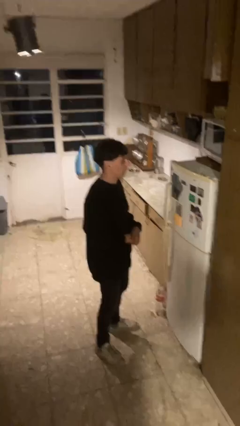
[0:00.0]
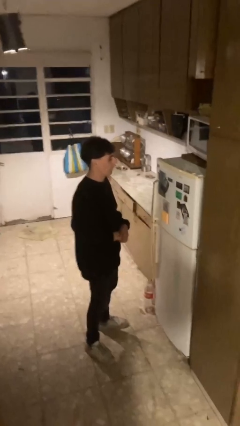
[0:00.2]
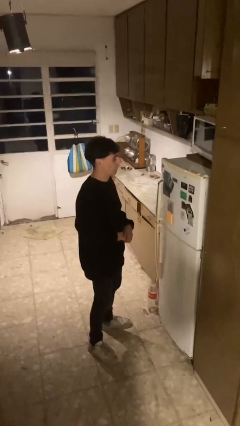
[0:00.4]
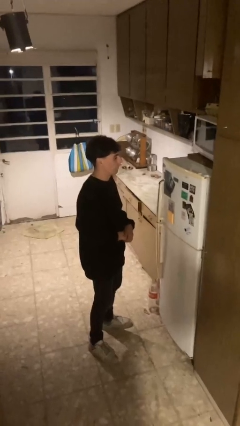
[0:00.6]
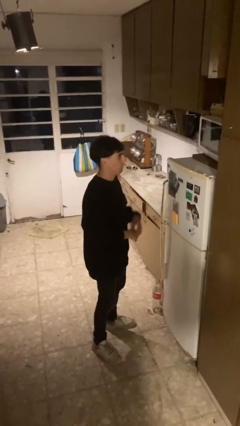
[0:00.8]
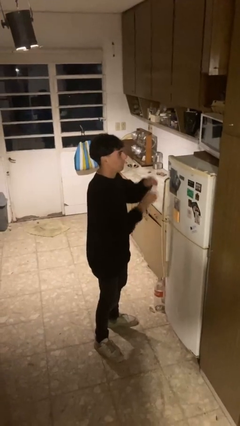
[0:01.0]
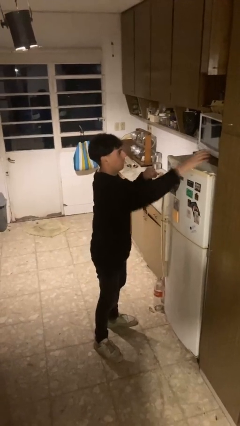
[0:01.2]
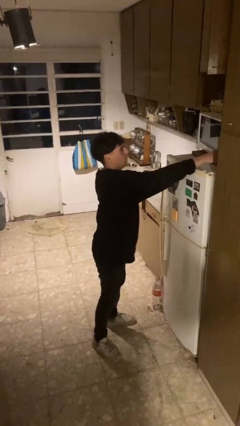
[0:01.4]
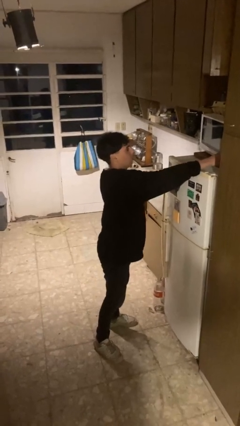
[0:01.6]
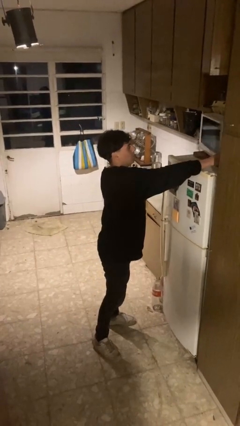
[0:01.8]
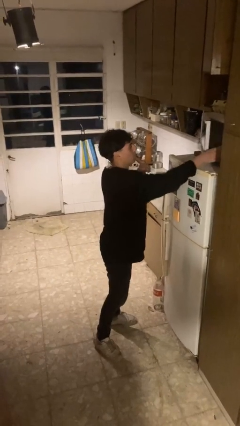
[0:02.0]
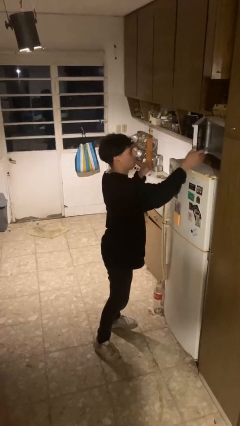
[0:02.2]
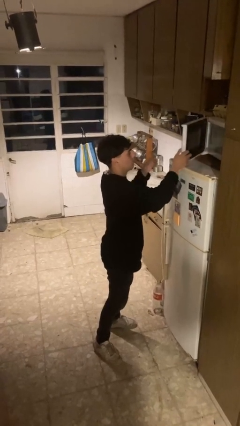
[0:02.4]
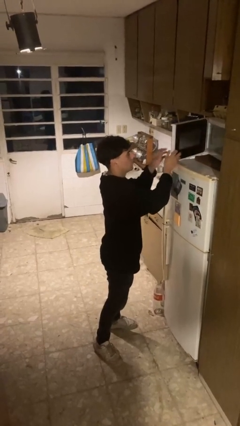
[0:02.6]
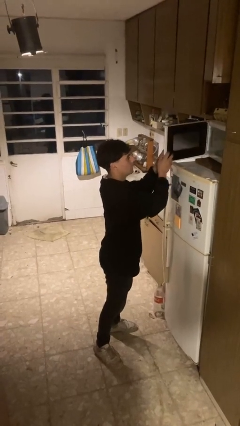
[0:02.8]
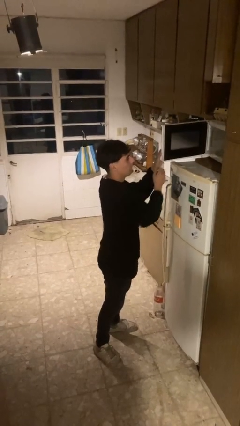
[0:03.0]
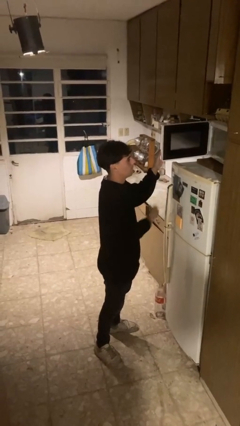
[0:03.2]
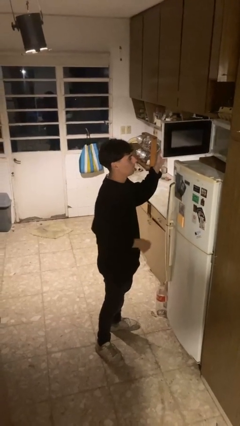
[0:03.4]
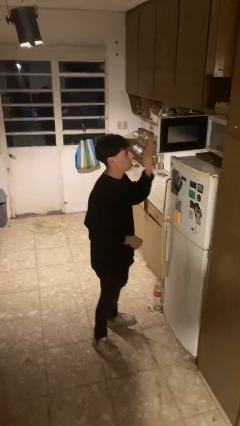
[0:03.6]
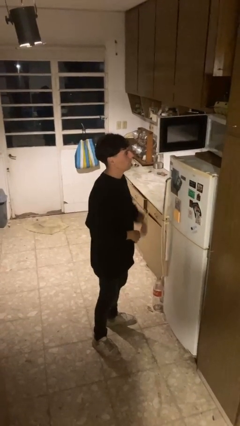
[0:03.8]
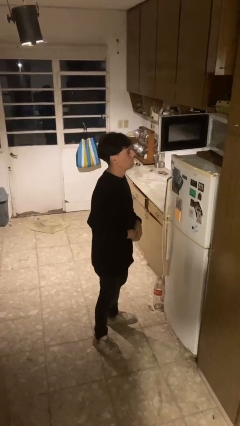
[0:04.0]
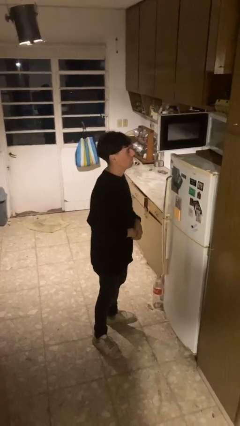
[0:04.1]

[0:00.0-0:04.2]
person opens microwave

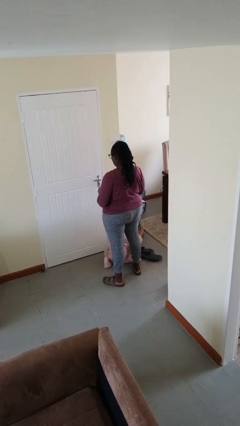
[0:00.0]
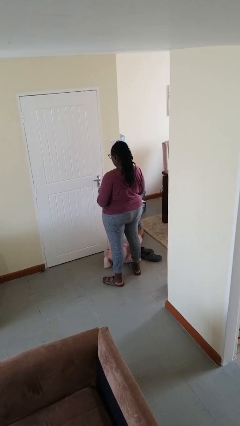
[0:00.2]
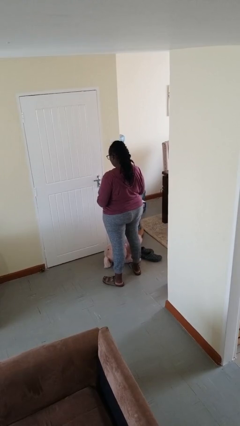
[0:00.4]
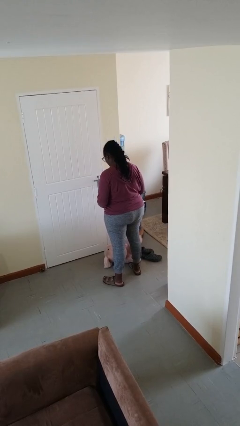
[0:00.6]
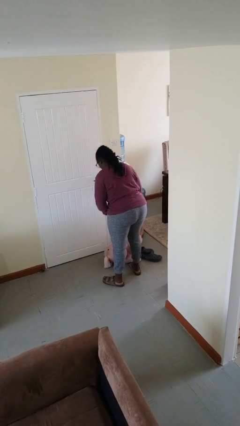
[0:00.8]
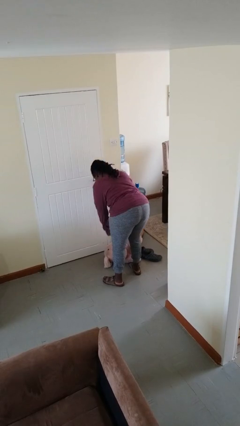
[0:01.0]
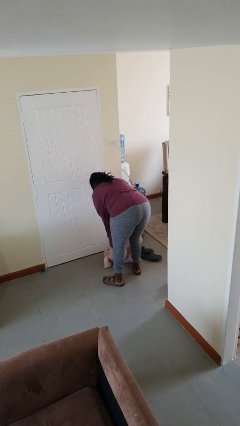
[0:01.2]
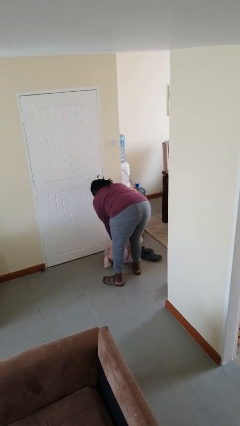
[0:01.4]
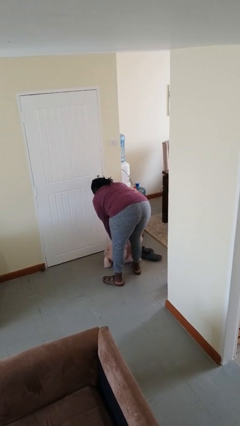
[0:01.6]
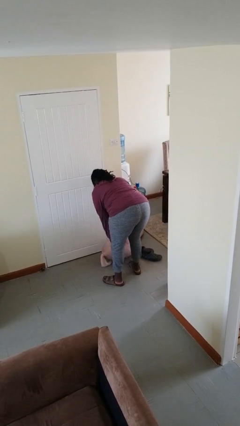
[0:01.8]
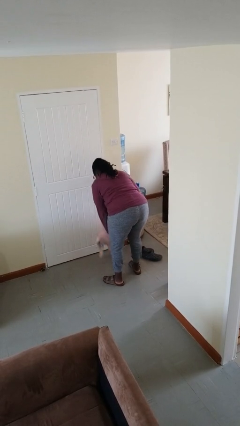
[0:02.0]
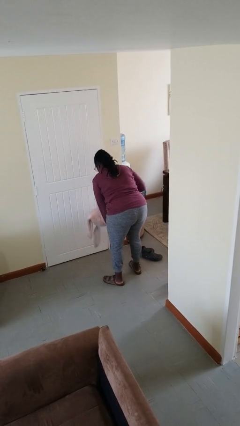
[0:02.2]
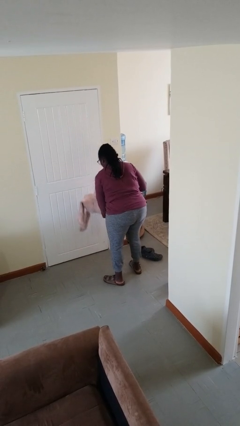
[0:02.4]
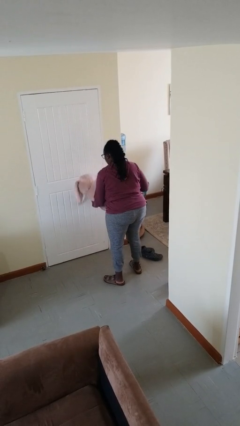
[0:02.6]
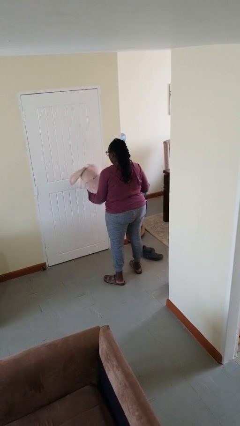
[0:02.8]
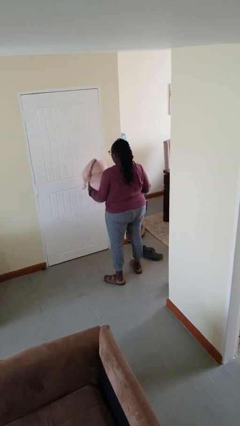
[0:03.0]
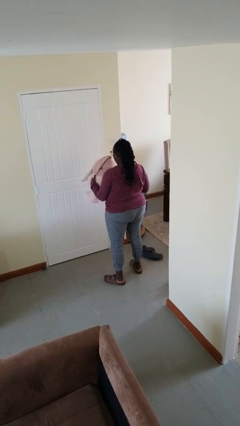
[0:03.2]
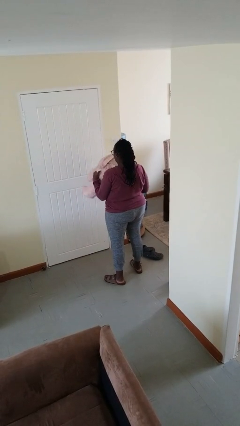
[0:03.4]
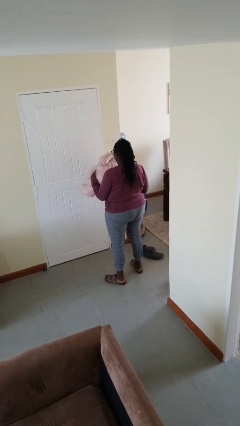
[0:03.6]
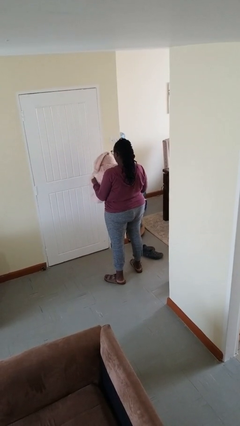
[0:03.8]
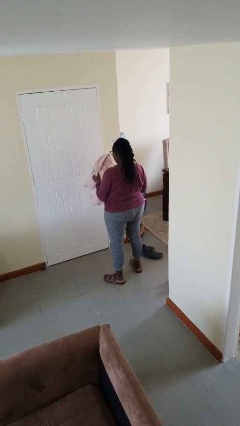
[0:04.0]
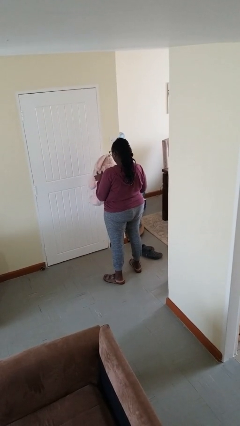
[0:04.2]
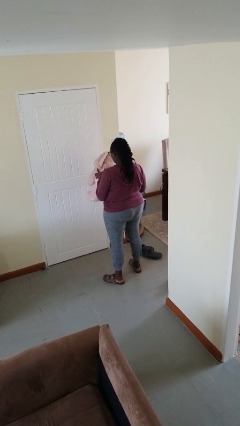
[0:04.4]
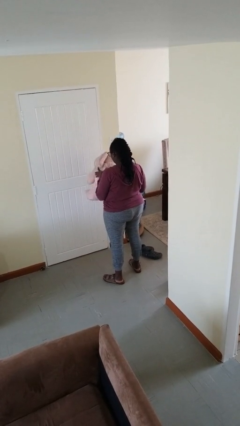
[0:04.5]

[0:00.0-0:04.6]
person picks up object from floor

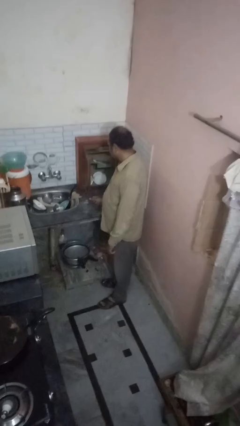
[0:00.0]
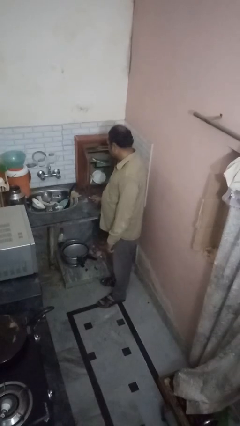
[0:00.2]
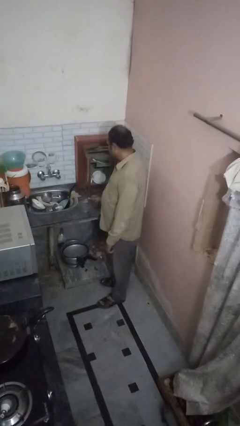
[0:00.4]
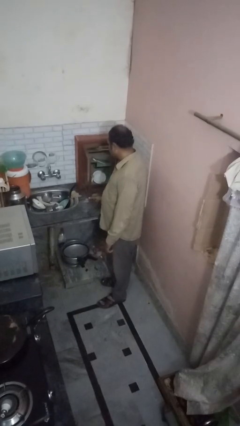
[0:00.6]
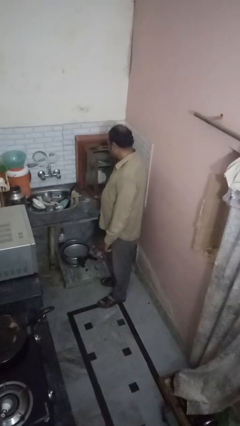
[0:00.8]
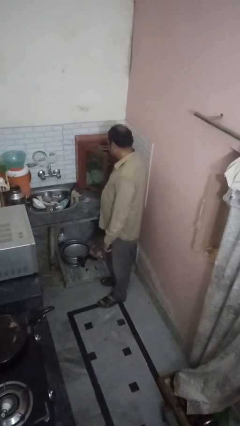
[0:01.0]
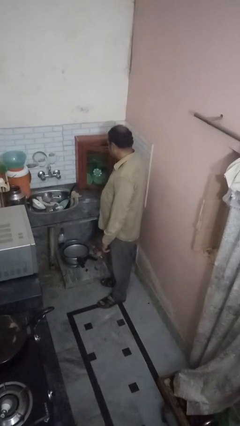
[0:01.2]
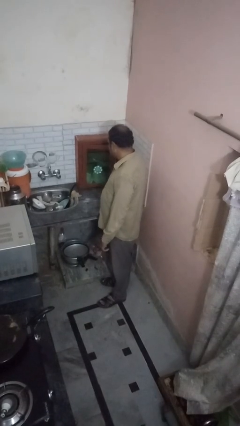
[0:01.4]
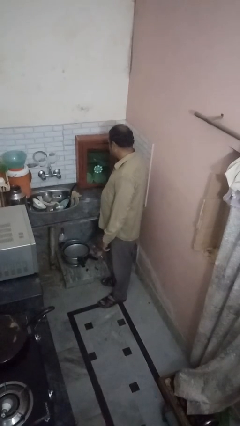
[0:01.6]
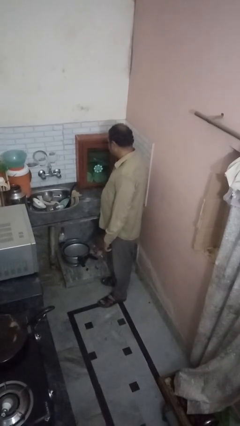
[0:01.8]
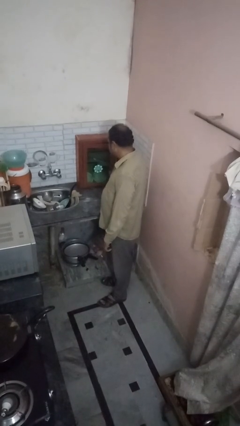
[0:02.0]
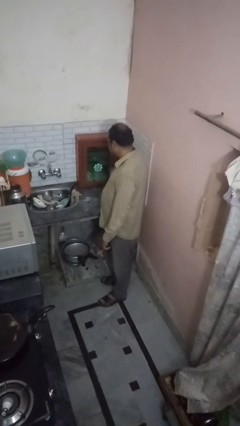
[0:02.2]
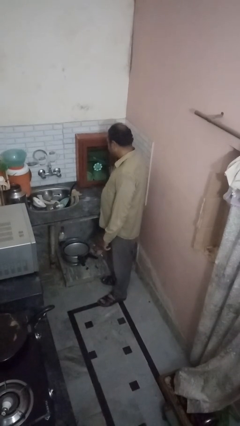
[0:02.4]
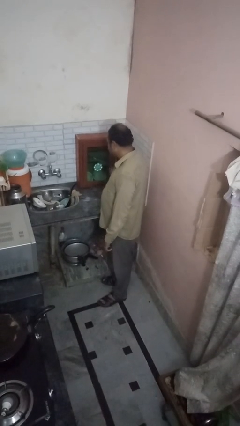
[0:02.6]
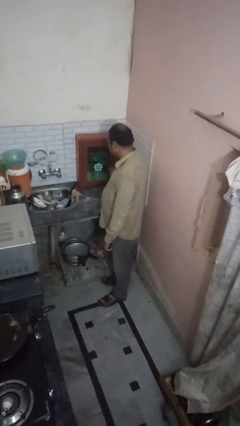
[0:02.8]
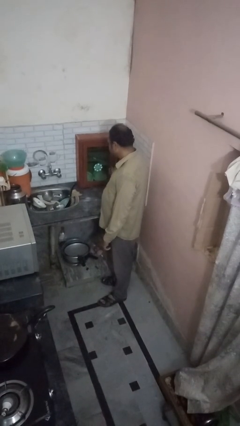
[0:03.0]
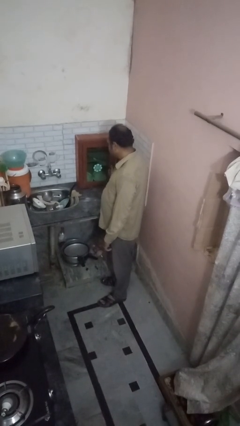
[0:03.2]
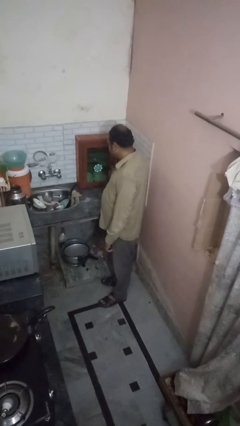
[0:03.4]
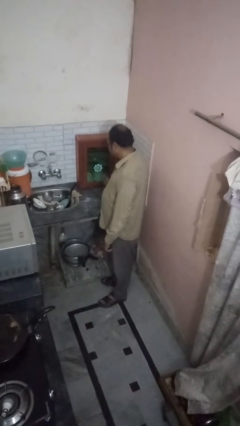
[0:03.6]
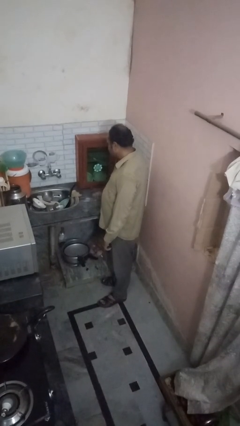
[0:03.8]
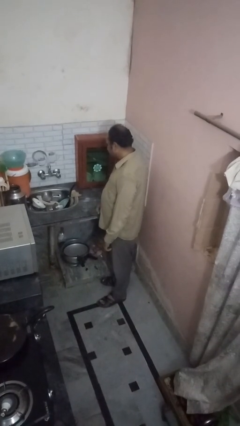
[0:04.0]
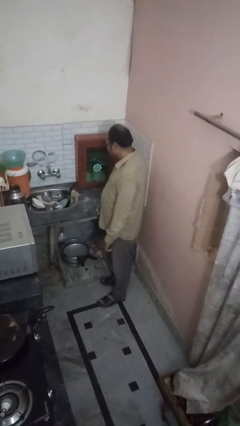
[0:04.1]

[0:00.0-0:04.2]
person closes cabinet

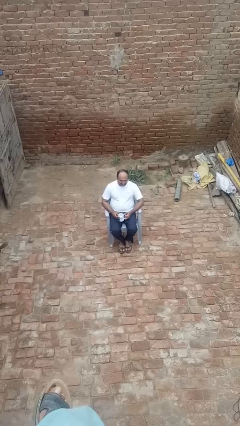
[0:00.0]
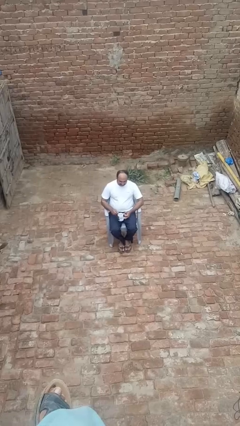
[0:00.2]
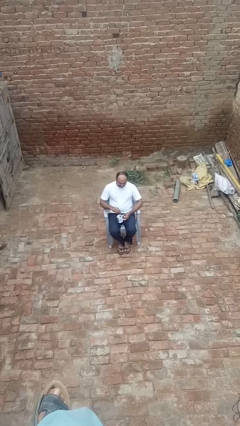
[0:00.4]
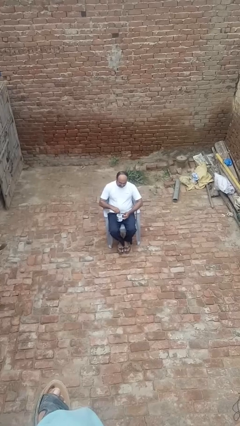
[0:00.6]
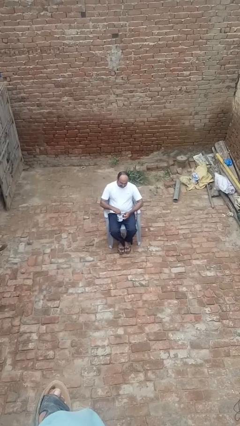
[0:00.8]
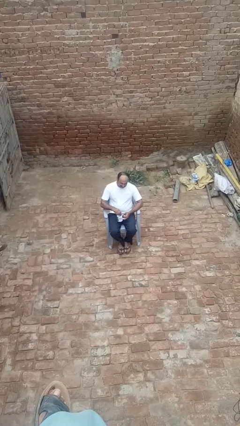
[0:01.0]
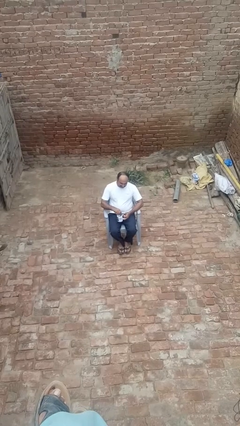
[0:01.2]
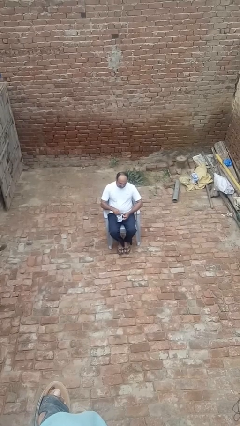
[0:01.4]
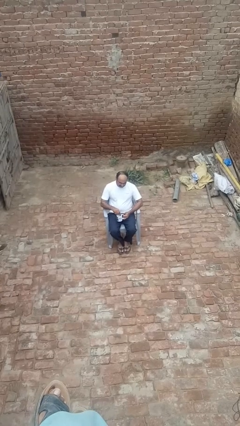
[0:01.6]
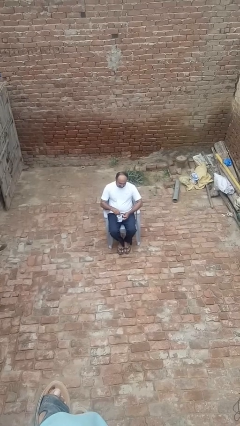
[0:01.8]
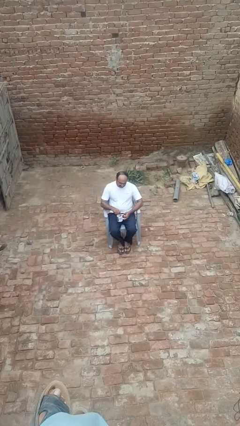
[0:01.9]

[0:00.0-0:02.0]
person stirs mug

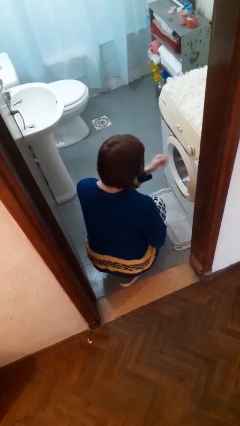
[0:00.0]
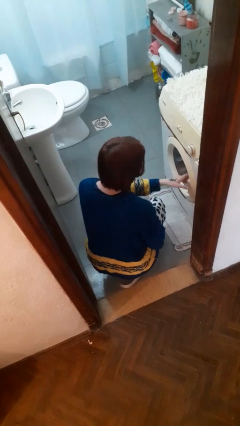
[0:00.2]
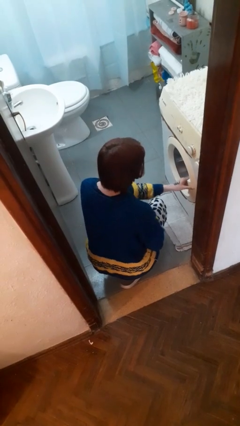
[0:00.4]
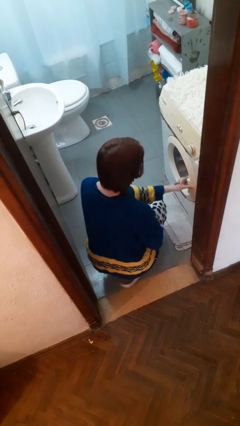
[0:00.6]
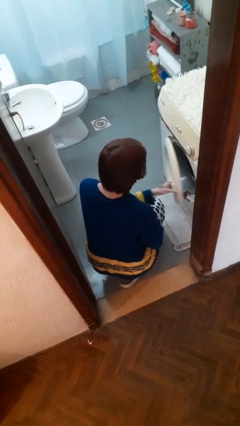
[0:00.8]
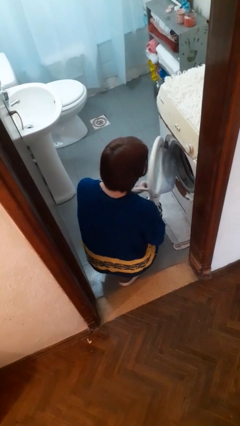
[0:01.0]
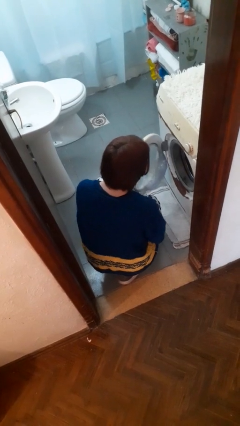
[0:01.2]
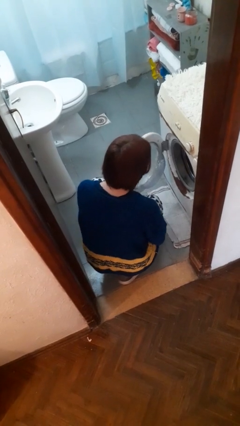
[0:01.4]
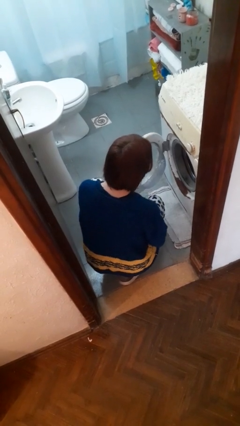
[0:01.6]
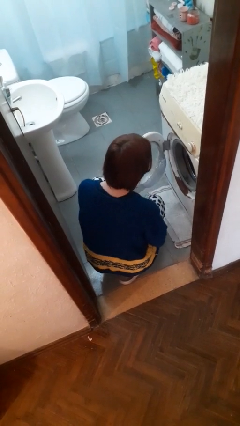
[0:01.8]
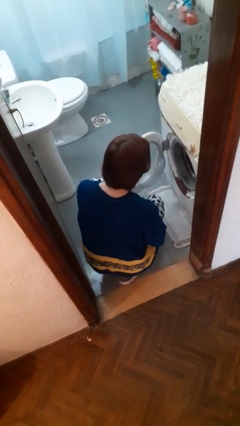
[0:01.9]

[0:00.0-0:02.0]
person opens clothes washer

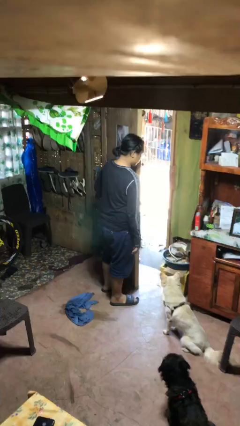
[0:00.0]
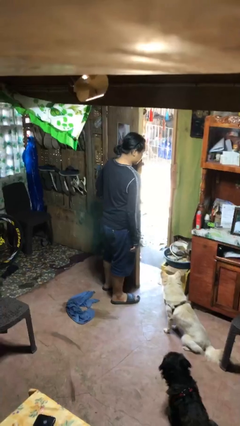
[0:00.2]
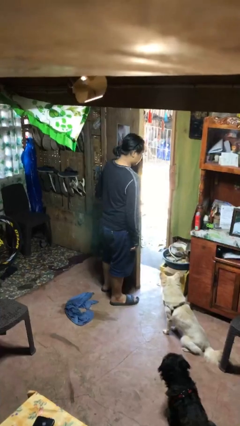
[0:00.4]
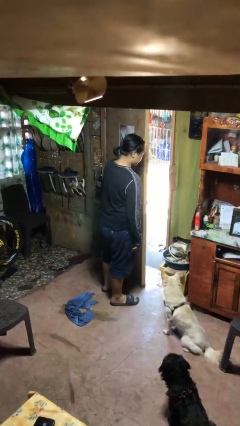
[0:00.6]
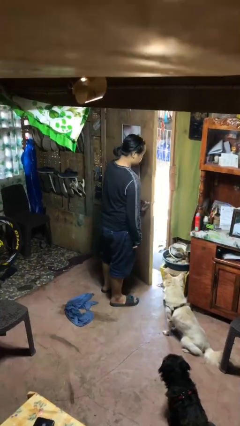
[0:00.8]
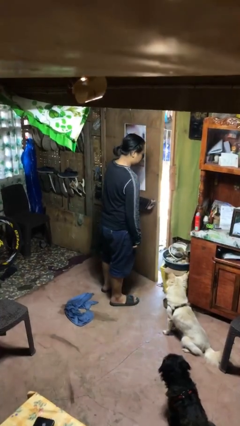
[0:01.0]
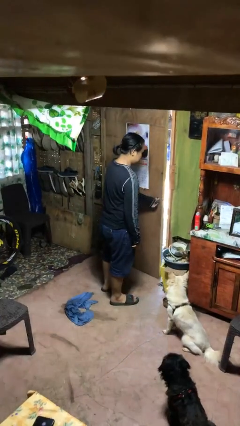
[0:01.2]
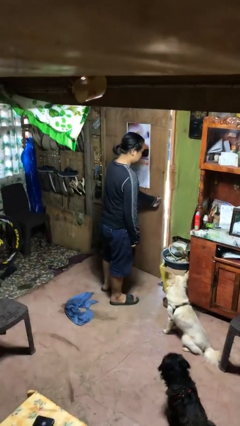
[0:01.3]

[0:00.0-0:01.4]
person closes facility door
